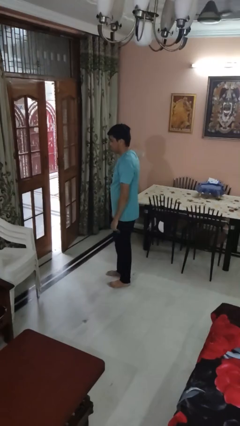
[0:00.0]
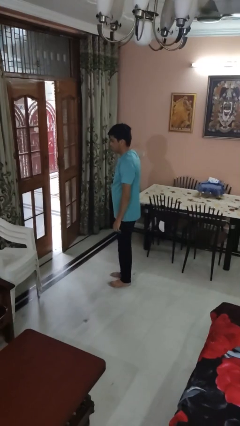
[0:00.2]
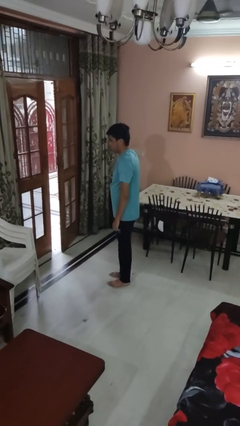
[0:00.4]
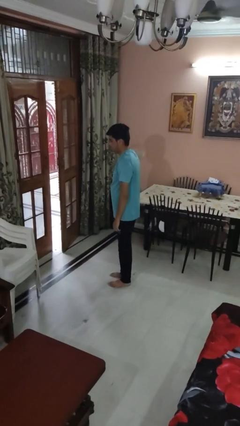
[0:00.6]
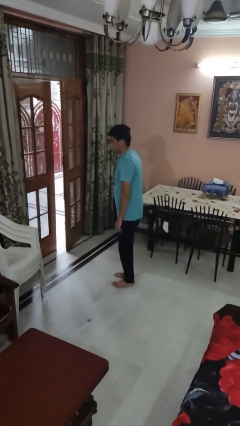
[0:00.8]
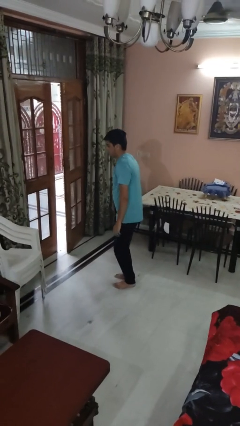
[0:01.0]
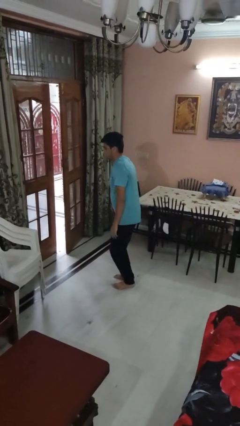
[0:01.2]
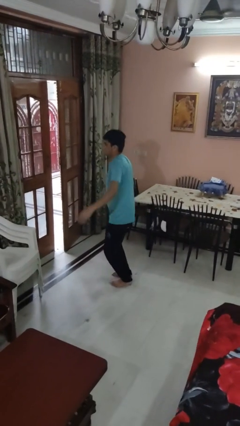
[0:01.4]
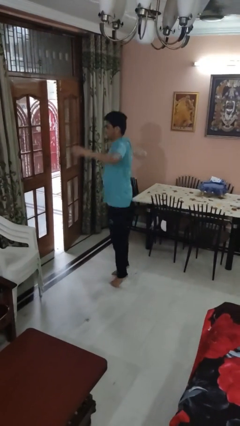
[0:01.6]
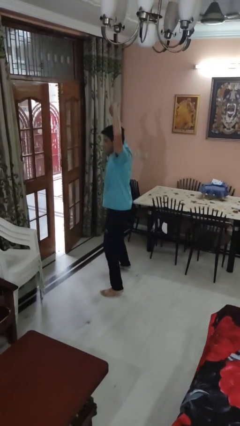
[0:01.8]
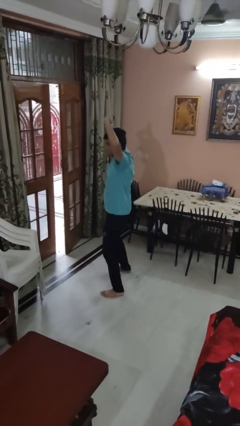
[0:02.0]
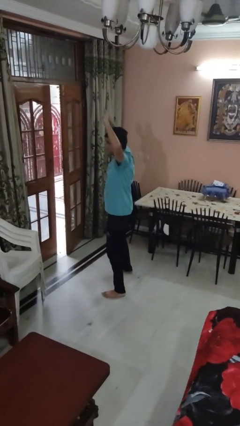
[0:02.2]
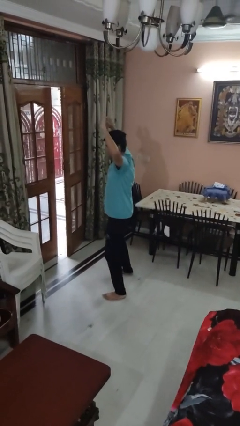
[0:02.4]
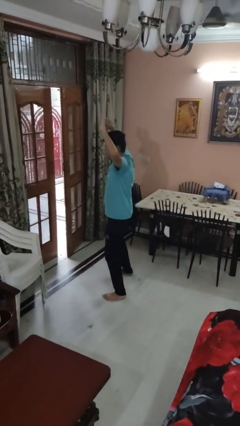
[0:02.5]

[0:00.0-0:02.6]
person exercises with jumping jacks

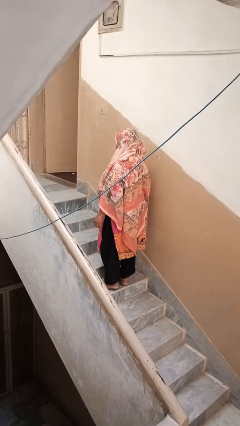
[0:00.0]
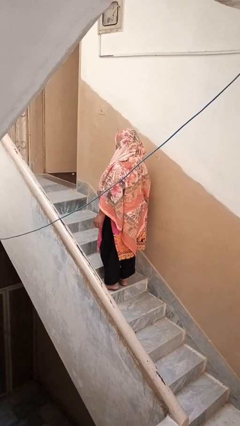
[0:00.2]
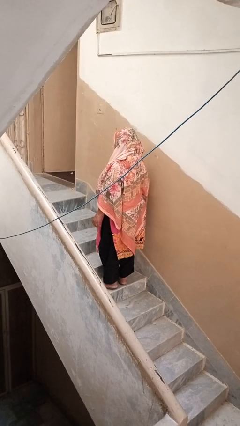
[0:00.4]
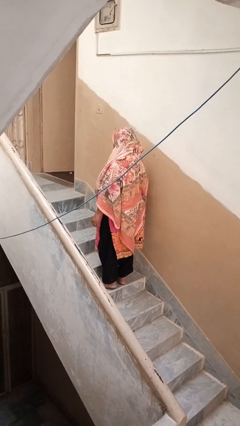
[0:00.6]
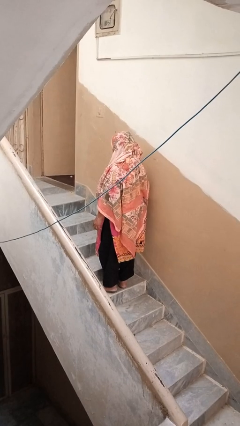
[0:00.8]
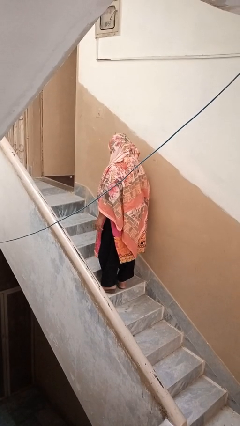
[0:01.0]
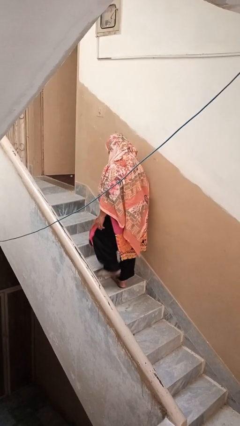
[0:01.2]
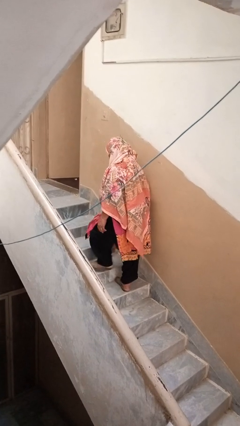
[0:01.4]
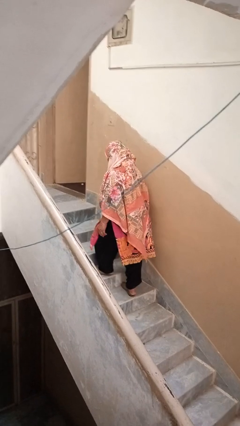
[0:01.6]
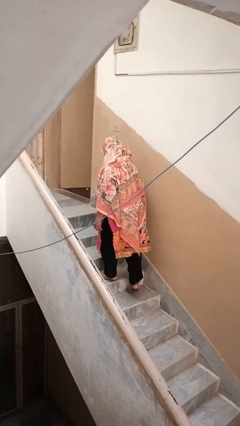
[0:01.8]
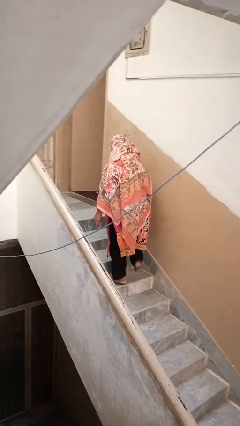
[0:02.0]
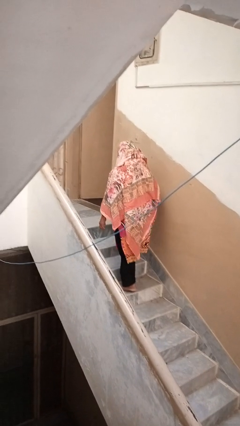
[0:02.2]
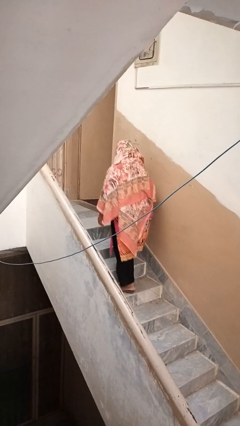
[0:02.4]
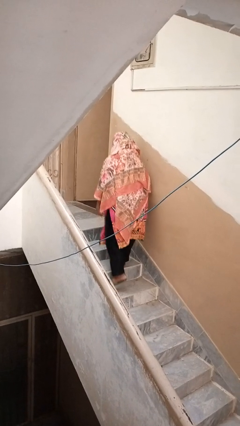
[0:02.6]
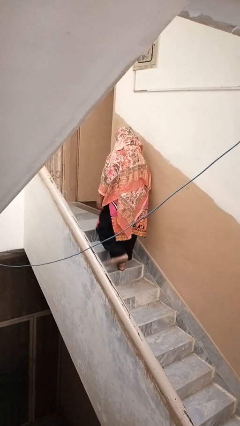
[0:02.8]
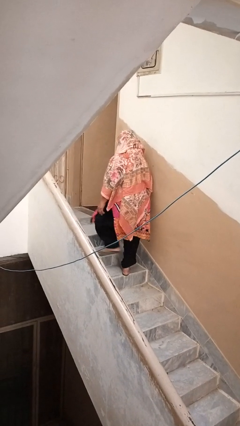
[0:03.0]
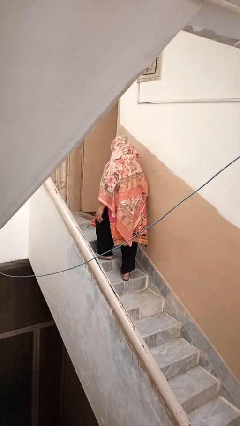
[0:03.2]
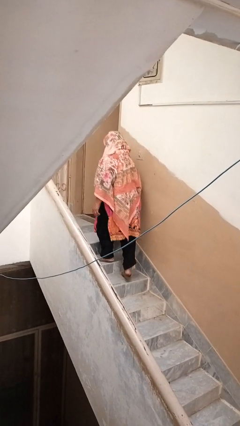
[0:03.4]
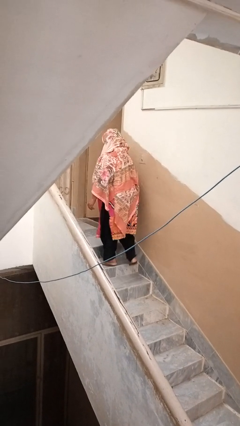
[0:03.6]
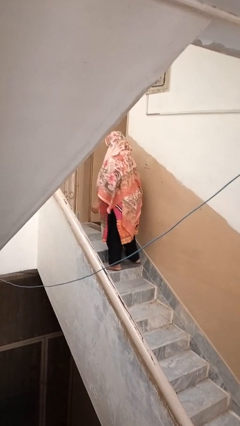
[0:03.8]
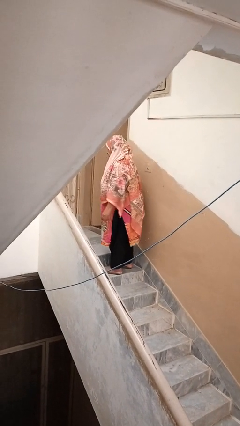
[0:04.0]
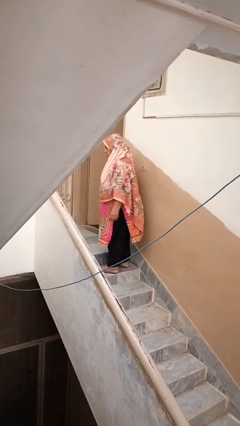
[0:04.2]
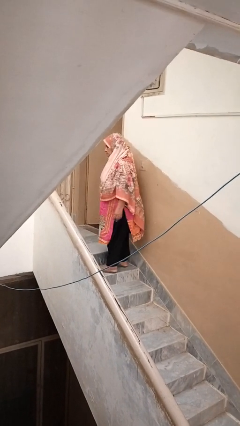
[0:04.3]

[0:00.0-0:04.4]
person climbs up stairs

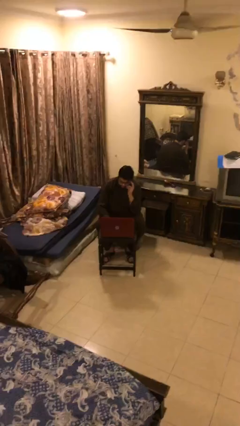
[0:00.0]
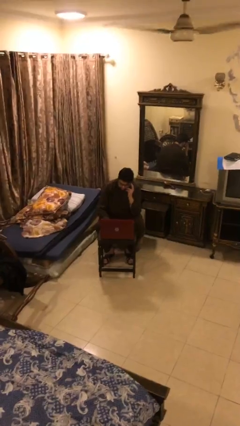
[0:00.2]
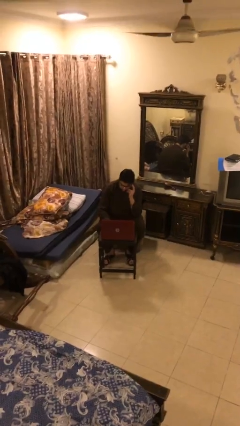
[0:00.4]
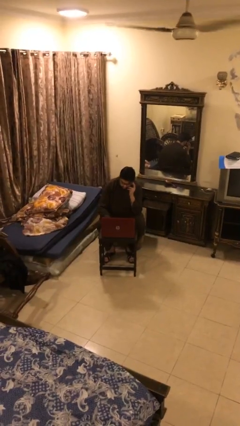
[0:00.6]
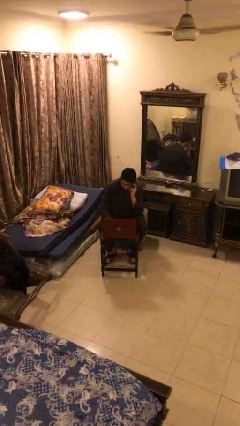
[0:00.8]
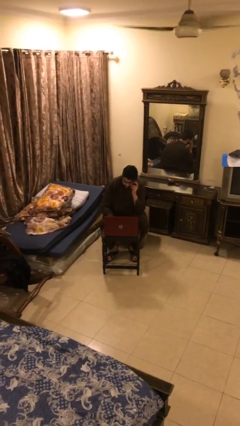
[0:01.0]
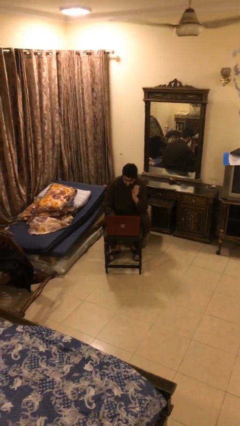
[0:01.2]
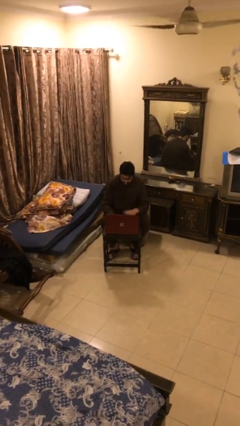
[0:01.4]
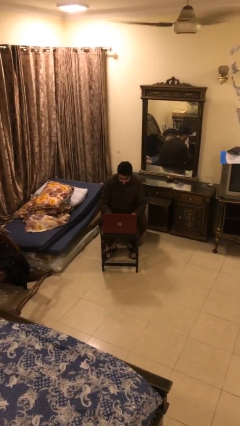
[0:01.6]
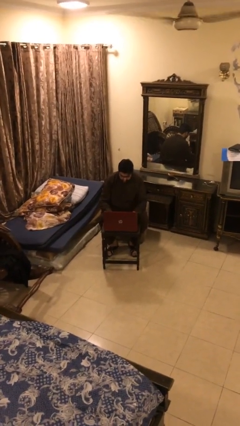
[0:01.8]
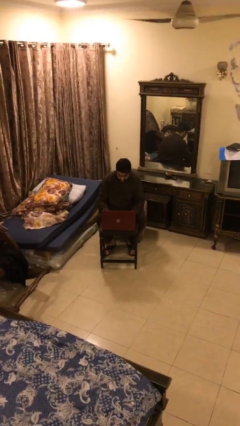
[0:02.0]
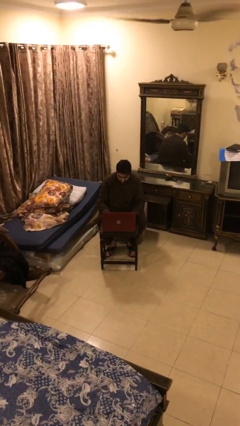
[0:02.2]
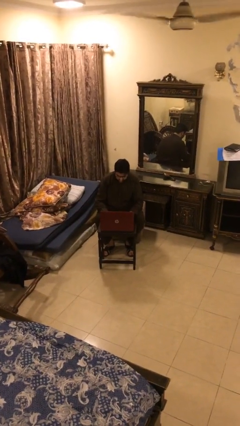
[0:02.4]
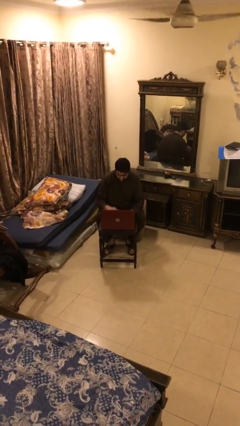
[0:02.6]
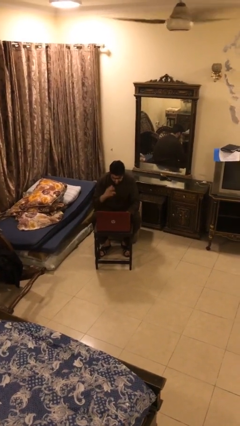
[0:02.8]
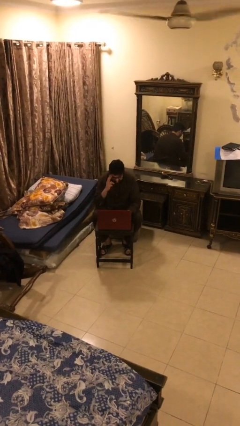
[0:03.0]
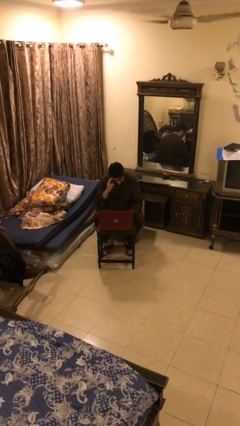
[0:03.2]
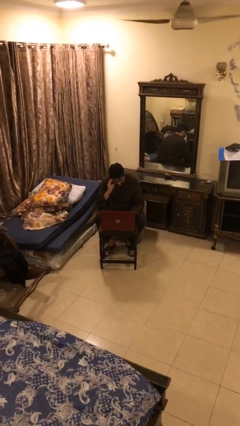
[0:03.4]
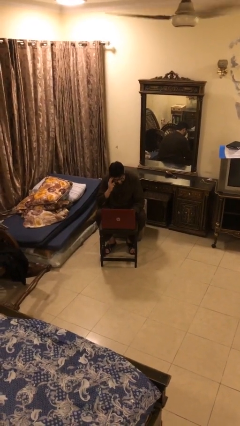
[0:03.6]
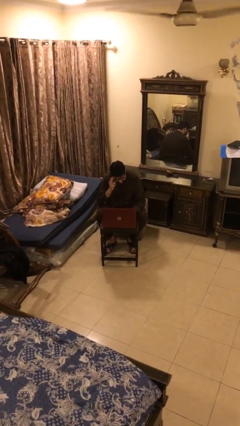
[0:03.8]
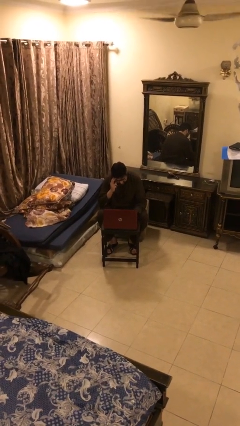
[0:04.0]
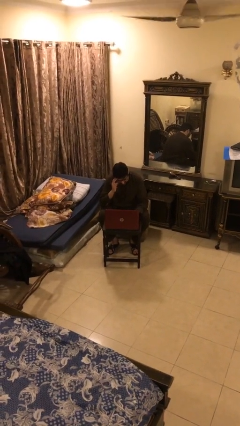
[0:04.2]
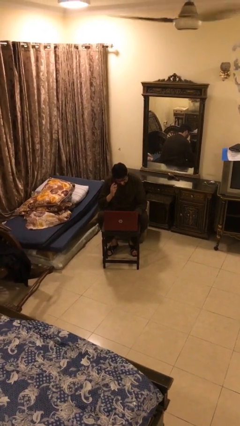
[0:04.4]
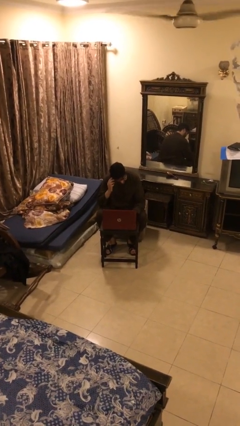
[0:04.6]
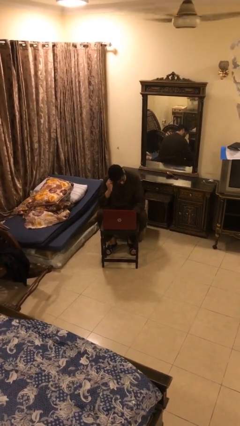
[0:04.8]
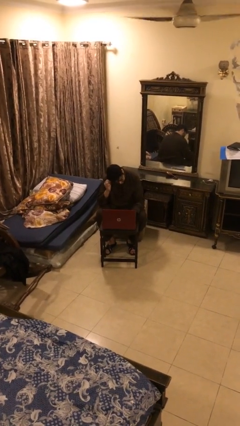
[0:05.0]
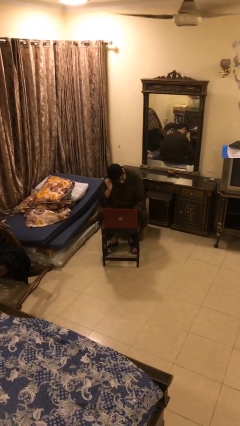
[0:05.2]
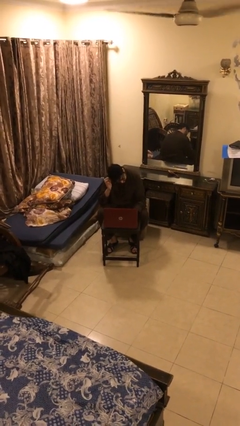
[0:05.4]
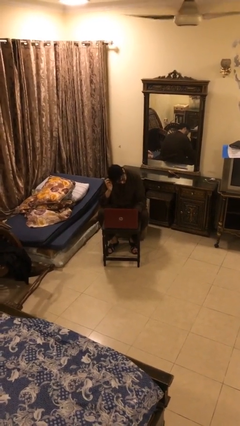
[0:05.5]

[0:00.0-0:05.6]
person interacts with laptop

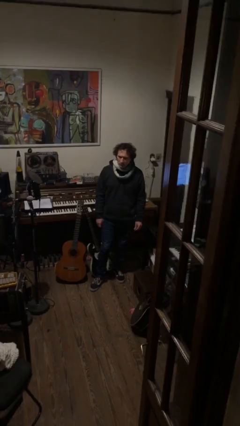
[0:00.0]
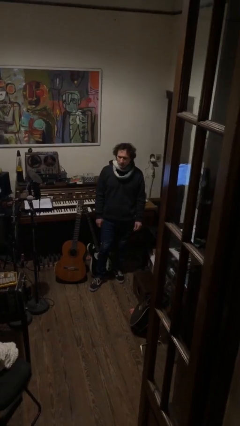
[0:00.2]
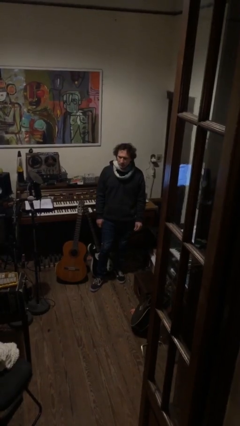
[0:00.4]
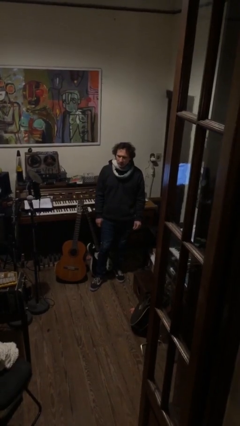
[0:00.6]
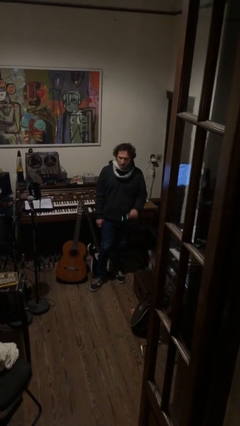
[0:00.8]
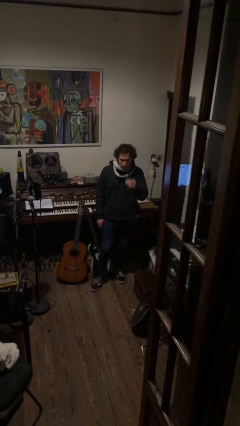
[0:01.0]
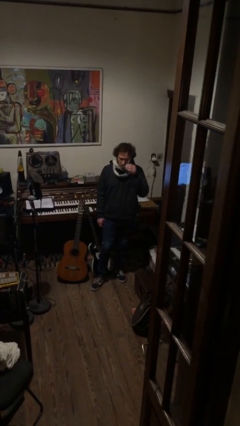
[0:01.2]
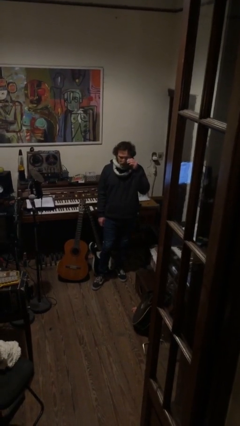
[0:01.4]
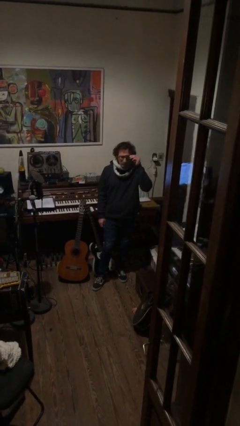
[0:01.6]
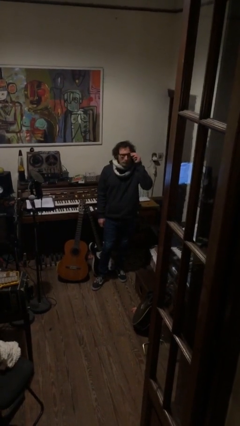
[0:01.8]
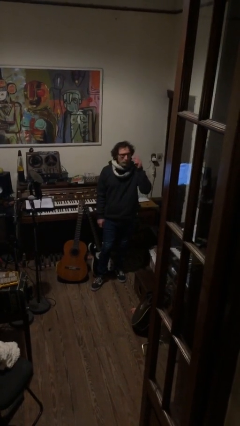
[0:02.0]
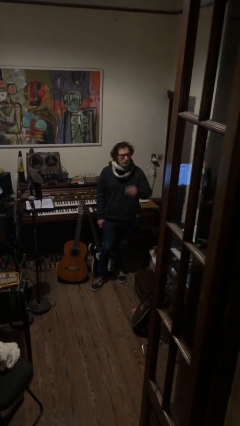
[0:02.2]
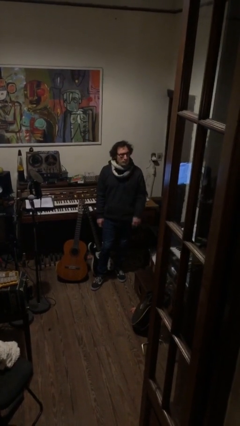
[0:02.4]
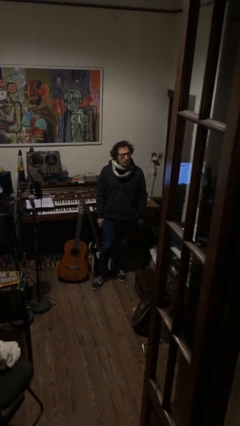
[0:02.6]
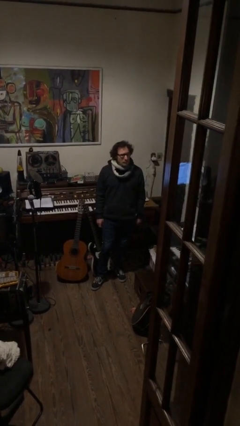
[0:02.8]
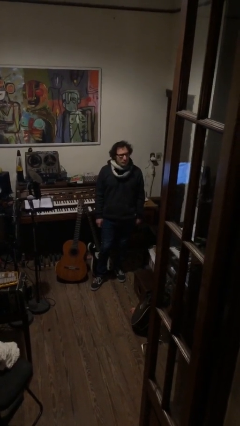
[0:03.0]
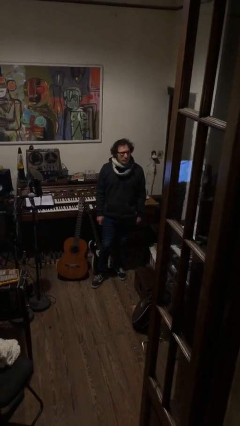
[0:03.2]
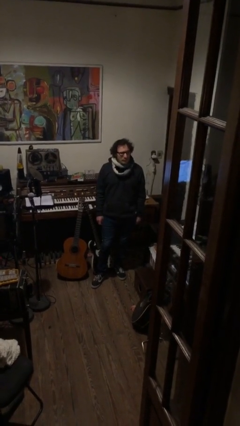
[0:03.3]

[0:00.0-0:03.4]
person puts on glasses

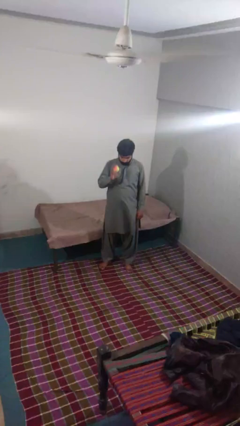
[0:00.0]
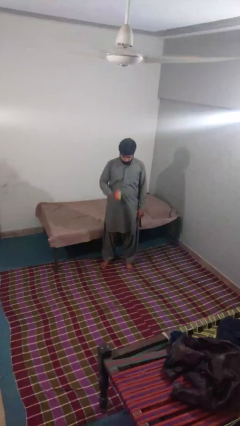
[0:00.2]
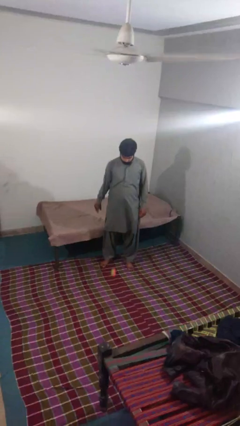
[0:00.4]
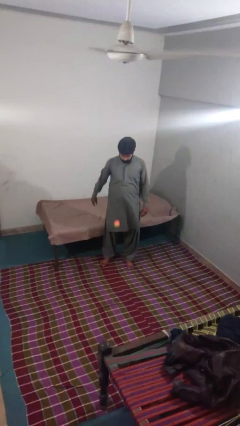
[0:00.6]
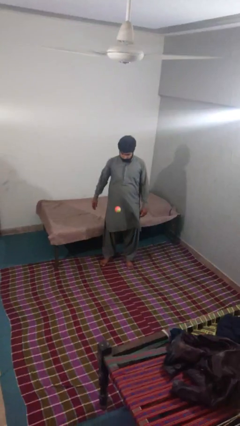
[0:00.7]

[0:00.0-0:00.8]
person bounces ball on floor

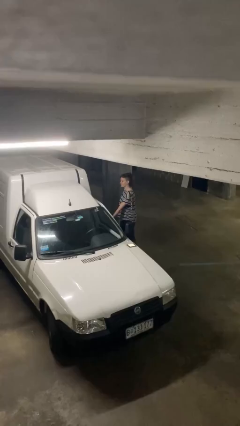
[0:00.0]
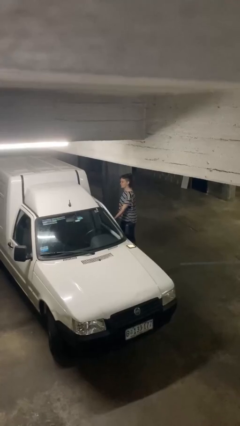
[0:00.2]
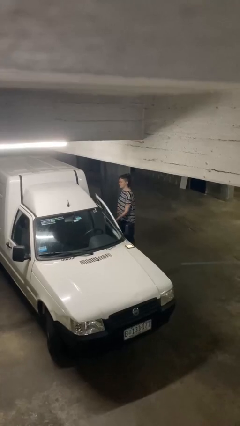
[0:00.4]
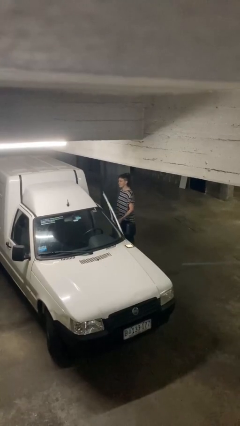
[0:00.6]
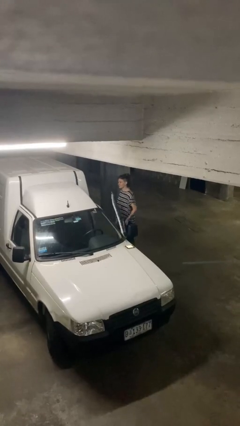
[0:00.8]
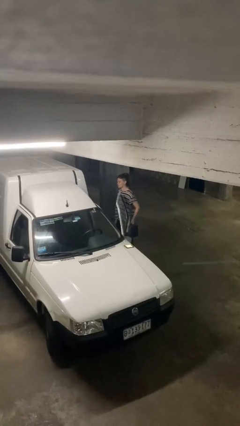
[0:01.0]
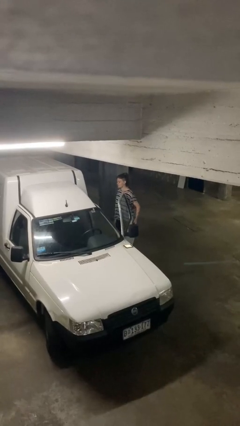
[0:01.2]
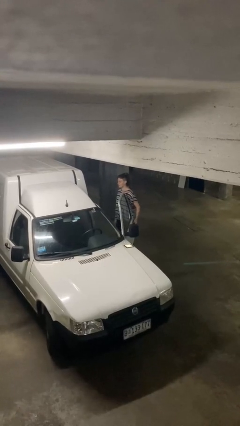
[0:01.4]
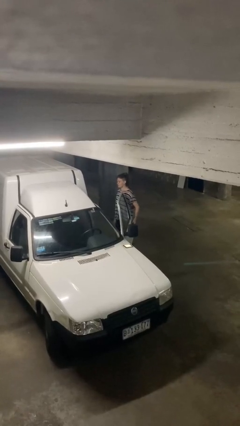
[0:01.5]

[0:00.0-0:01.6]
person opens car door
